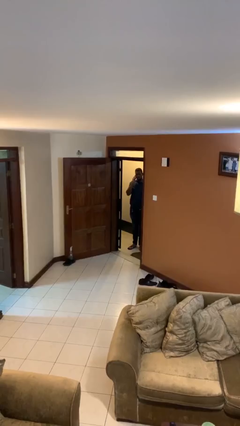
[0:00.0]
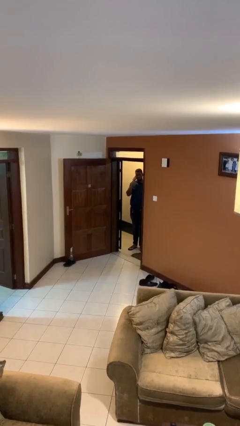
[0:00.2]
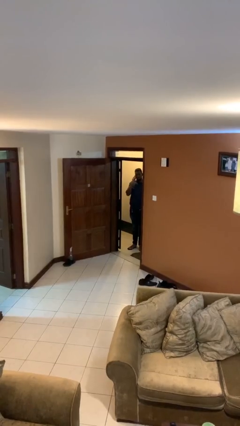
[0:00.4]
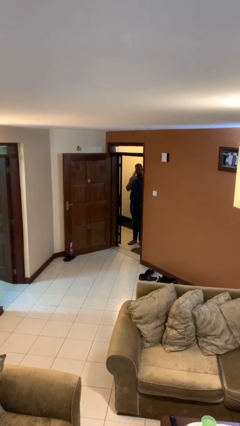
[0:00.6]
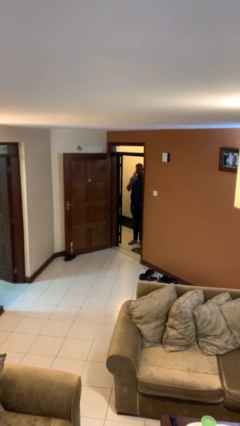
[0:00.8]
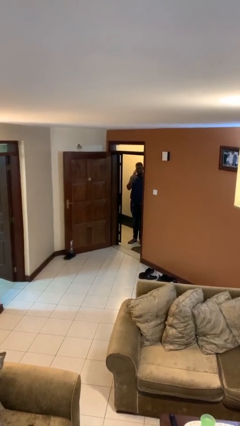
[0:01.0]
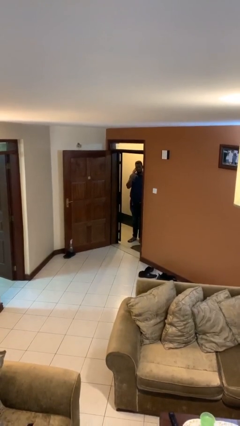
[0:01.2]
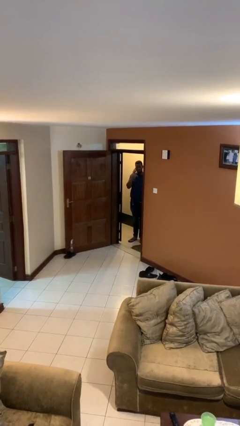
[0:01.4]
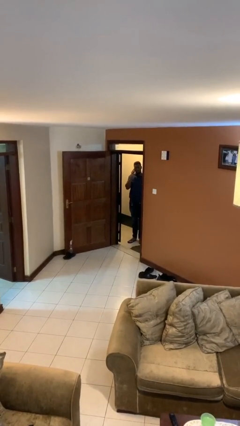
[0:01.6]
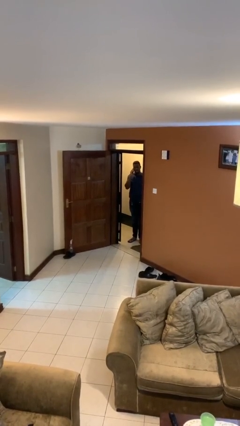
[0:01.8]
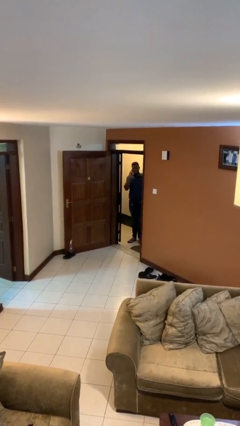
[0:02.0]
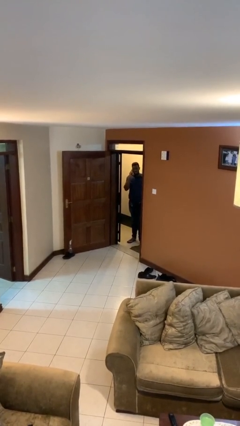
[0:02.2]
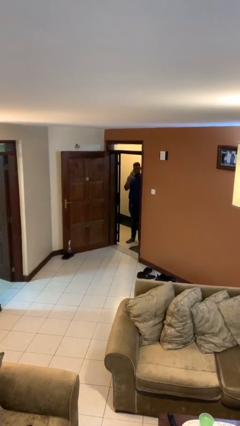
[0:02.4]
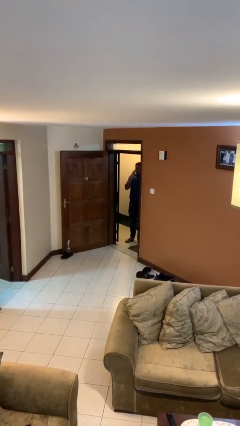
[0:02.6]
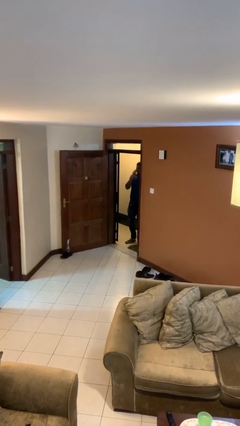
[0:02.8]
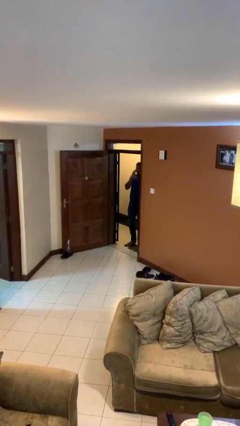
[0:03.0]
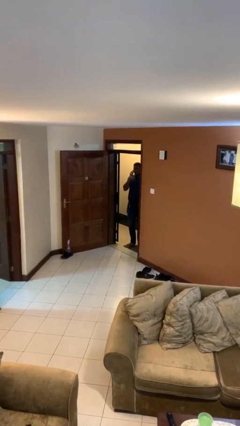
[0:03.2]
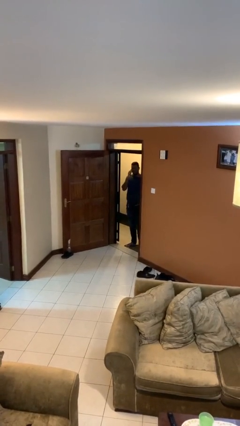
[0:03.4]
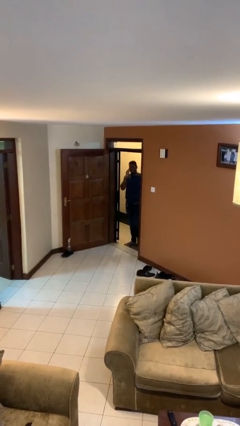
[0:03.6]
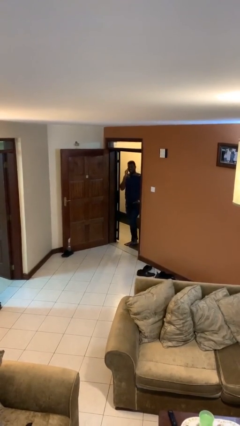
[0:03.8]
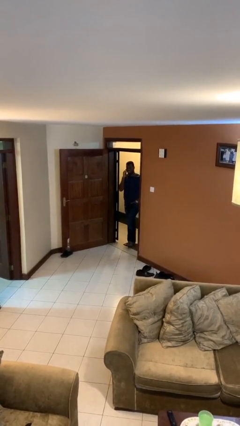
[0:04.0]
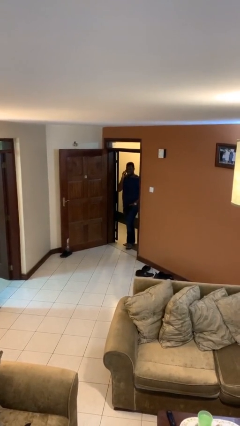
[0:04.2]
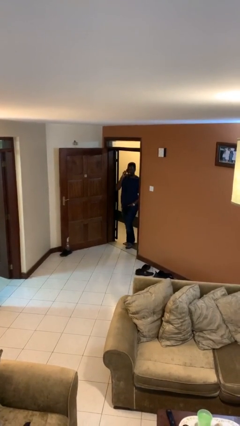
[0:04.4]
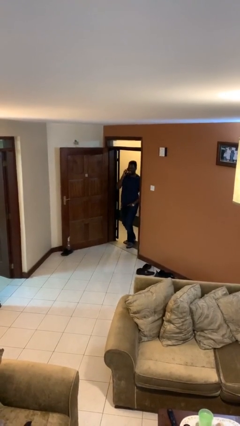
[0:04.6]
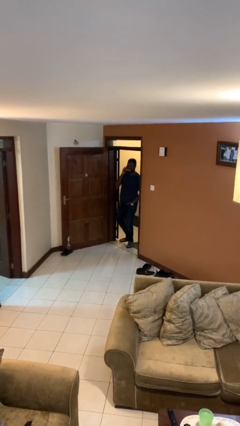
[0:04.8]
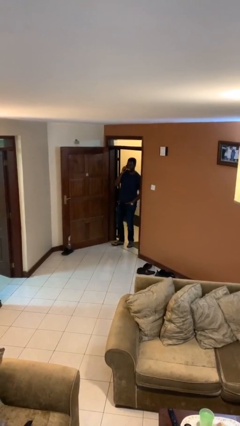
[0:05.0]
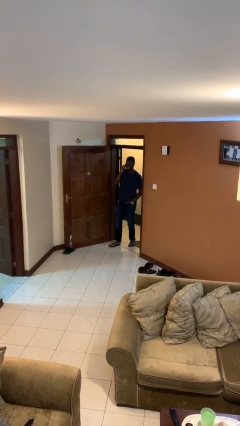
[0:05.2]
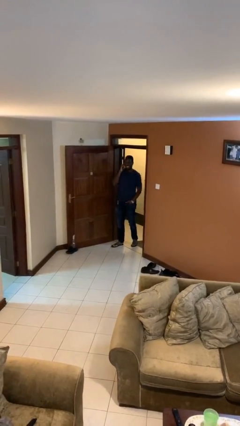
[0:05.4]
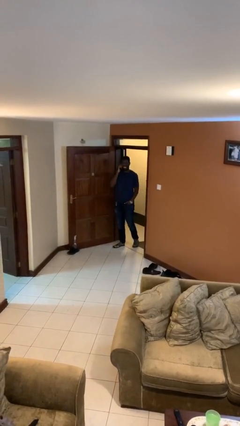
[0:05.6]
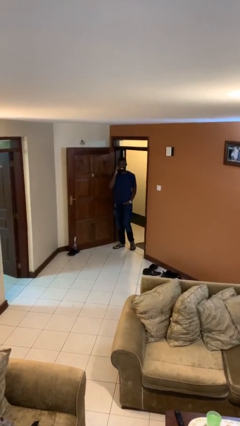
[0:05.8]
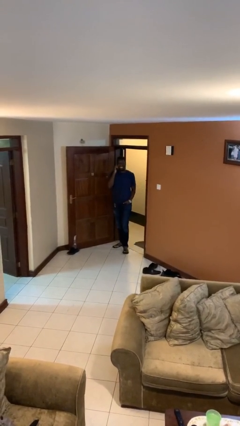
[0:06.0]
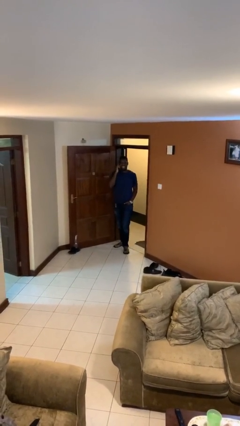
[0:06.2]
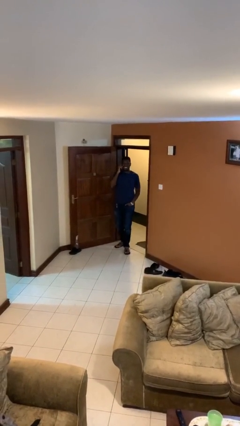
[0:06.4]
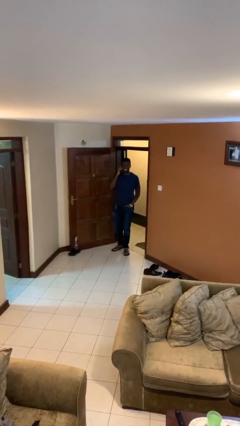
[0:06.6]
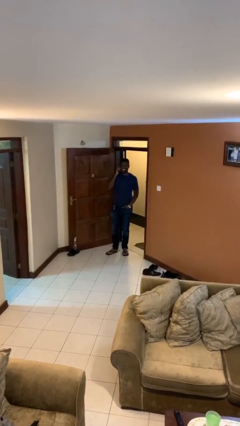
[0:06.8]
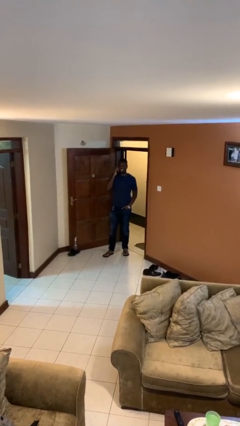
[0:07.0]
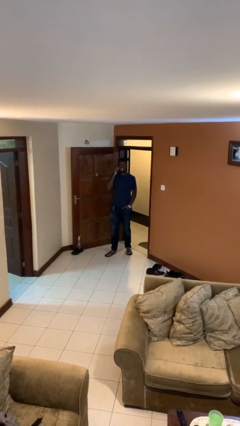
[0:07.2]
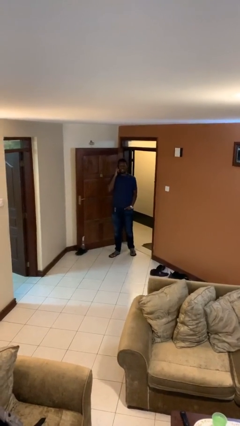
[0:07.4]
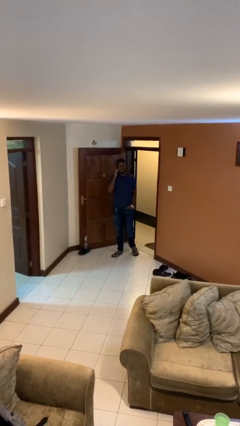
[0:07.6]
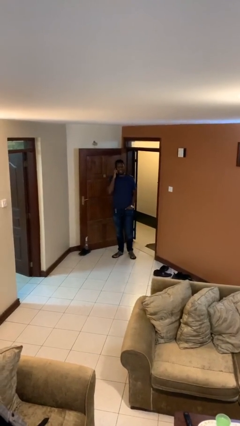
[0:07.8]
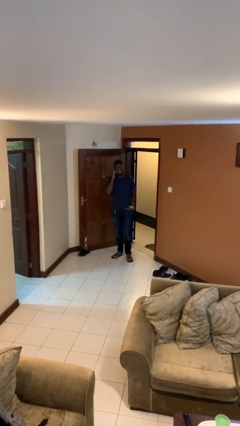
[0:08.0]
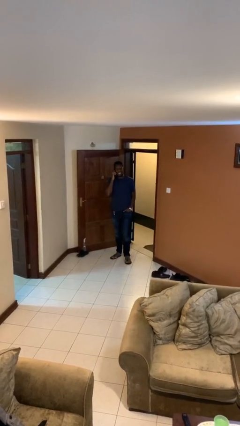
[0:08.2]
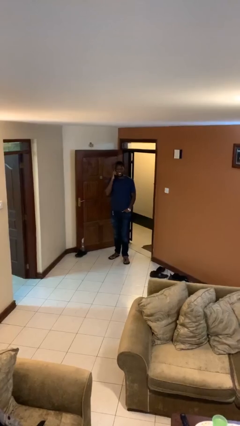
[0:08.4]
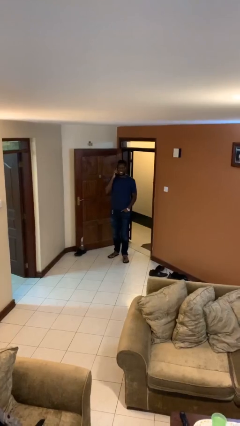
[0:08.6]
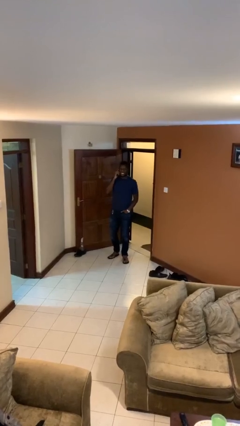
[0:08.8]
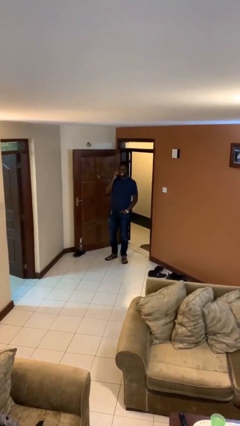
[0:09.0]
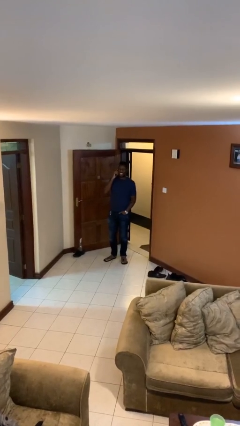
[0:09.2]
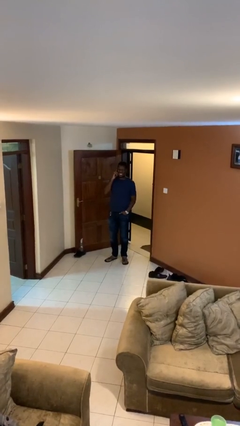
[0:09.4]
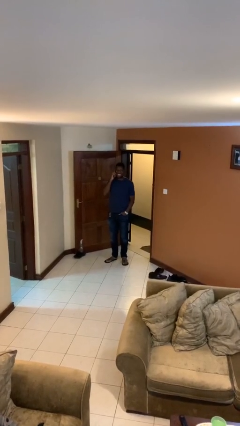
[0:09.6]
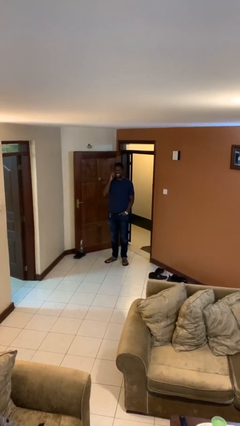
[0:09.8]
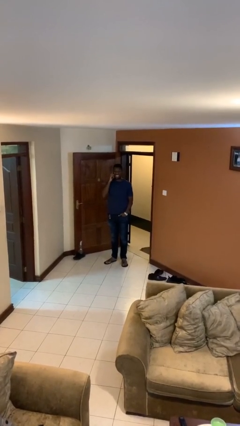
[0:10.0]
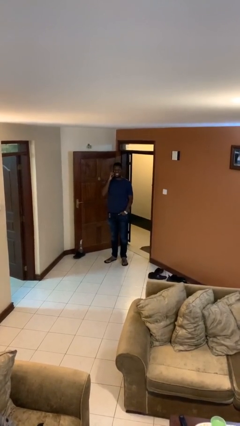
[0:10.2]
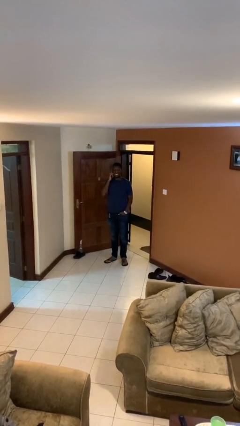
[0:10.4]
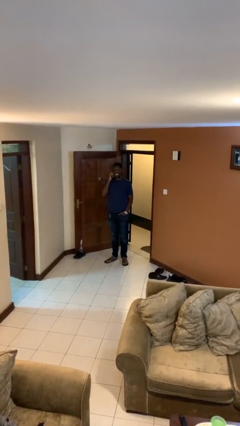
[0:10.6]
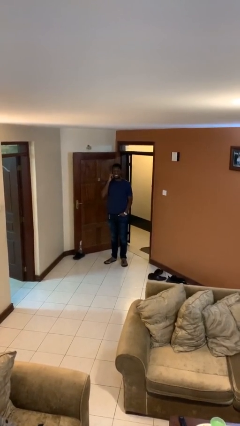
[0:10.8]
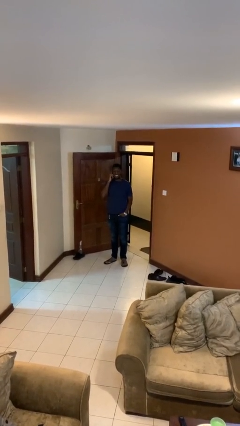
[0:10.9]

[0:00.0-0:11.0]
person enters scene through structure

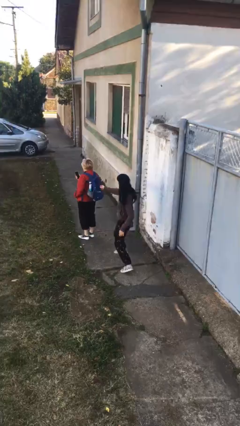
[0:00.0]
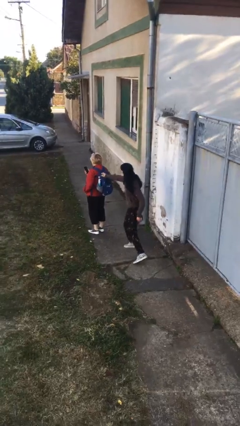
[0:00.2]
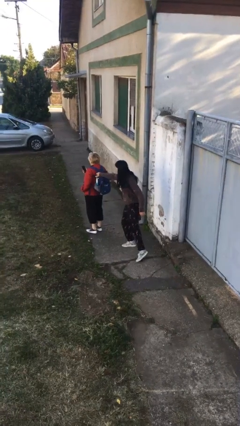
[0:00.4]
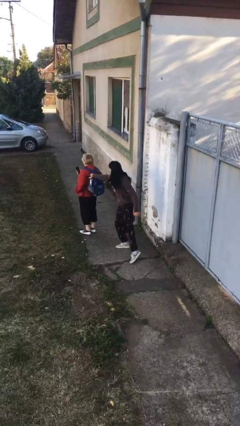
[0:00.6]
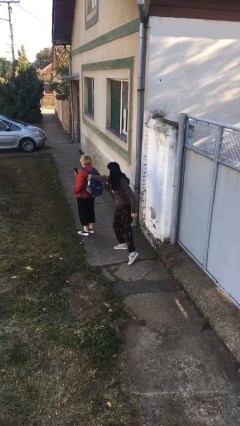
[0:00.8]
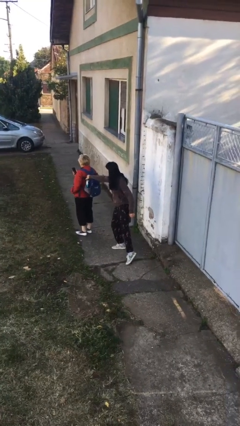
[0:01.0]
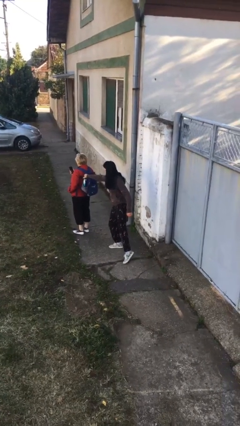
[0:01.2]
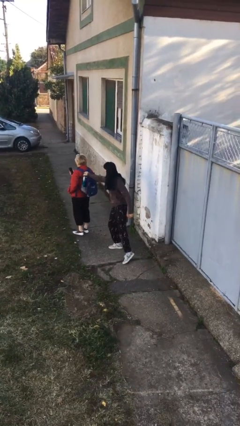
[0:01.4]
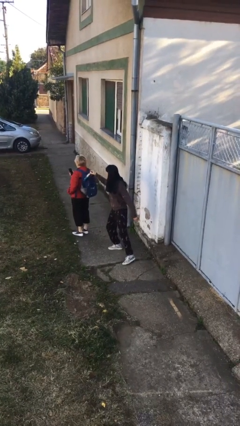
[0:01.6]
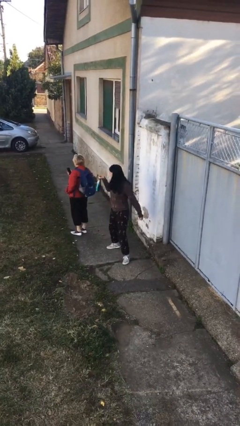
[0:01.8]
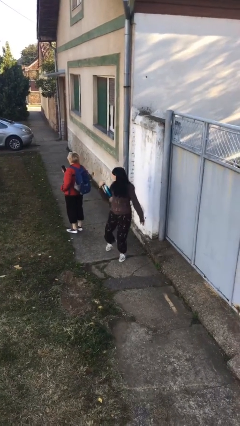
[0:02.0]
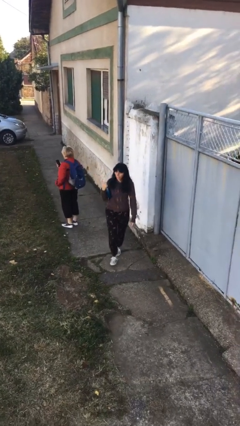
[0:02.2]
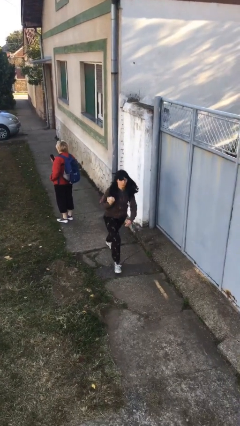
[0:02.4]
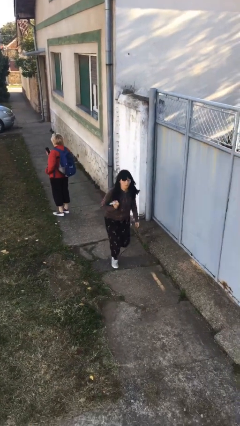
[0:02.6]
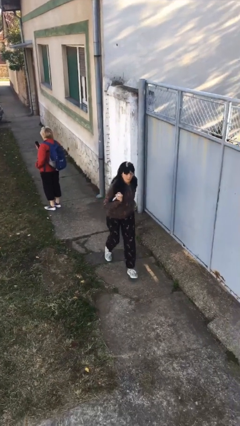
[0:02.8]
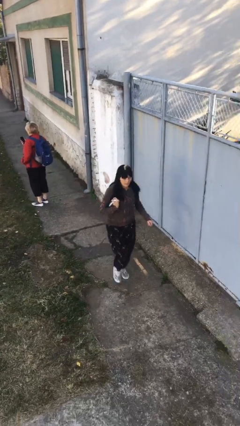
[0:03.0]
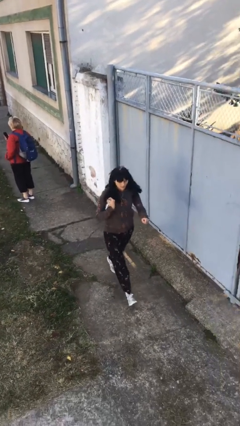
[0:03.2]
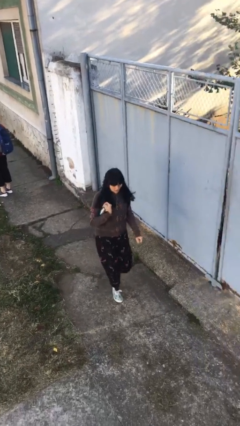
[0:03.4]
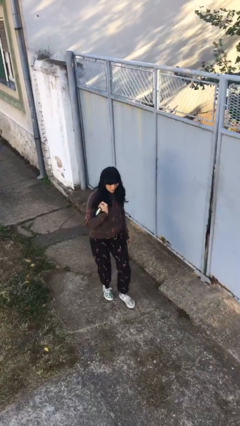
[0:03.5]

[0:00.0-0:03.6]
person steals object from person

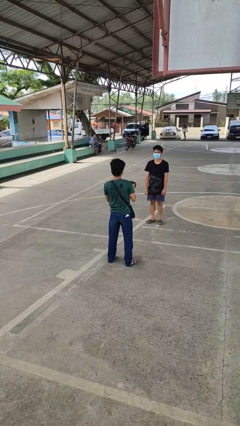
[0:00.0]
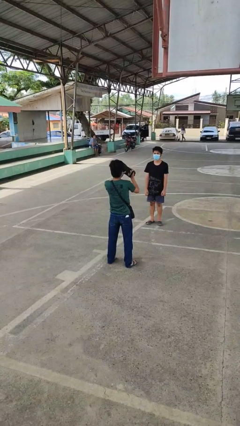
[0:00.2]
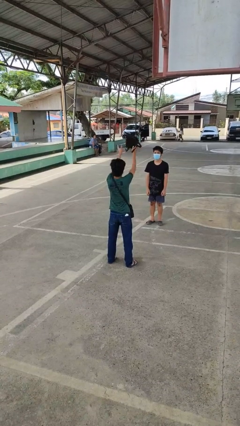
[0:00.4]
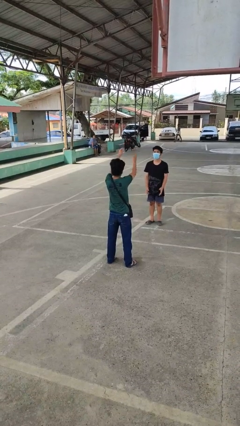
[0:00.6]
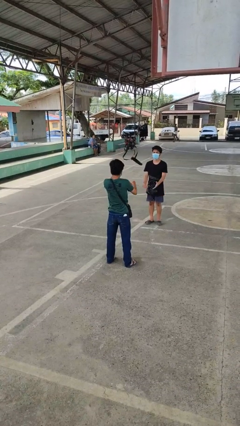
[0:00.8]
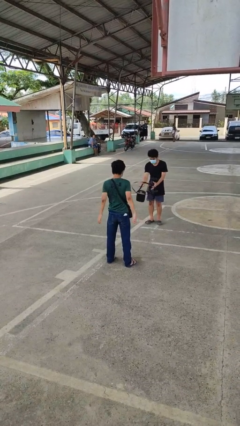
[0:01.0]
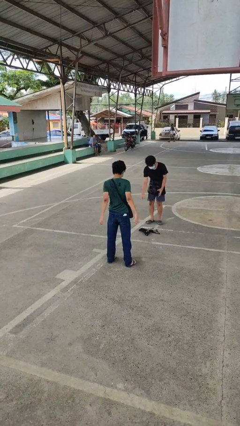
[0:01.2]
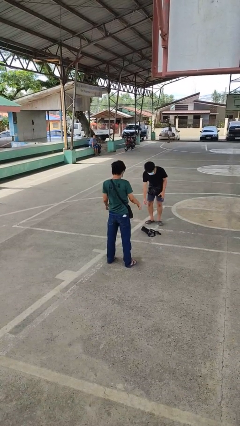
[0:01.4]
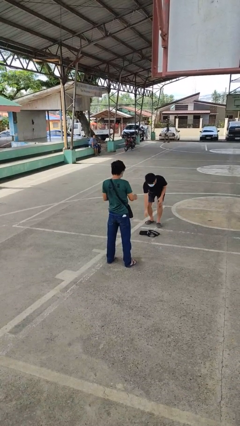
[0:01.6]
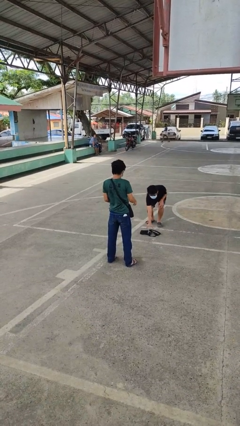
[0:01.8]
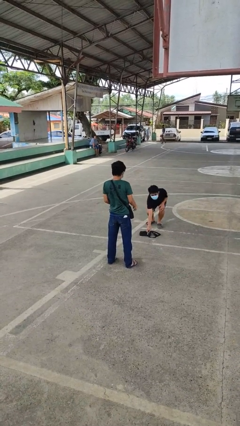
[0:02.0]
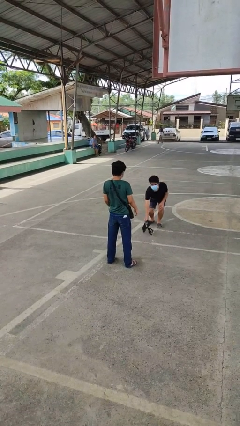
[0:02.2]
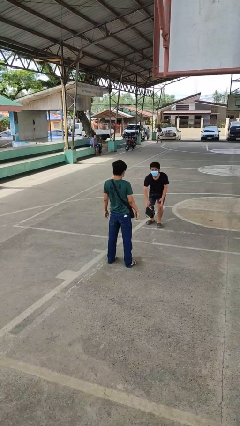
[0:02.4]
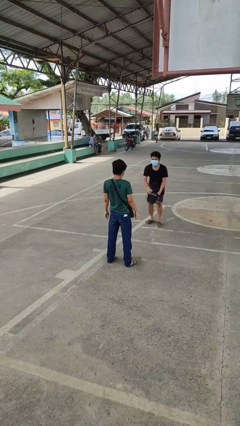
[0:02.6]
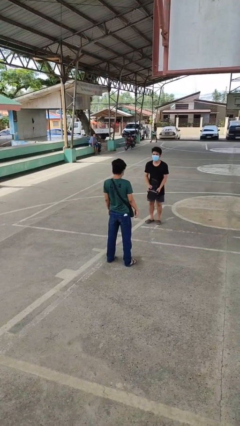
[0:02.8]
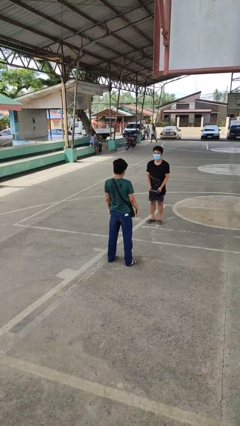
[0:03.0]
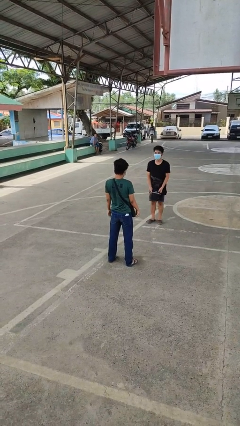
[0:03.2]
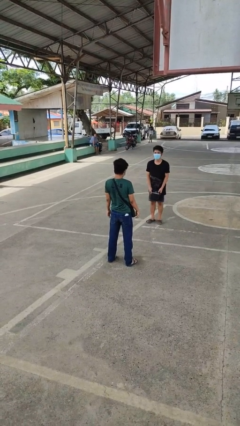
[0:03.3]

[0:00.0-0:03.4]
person throws object to person
